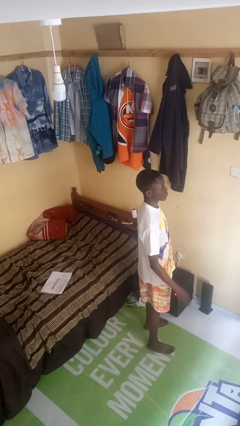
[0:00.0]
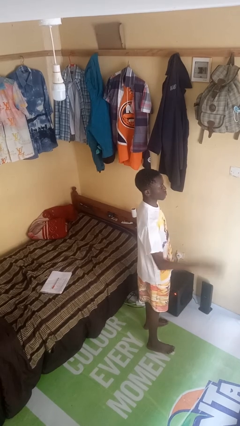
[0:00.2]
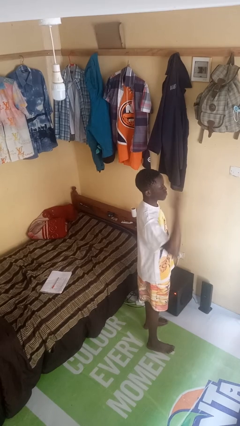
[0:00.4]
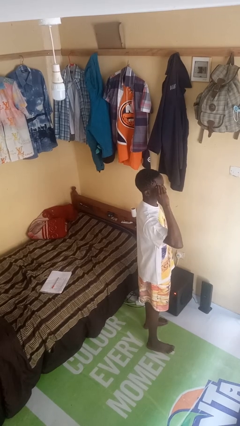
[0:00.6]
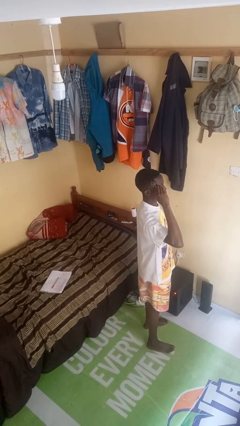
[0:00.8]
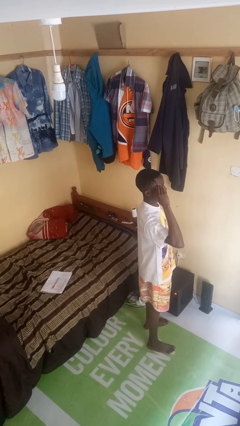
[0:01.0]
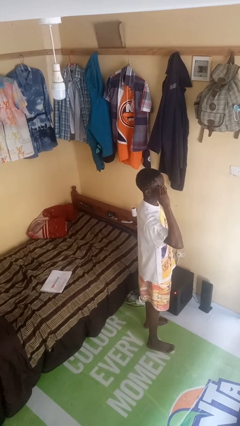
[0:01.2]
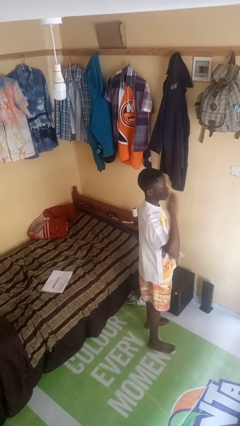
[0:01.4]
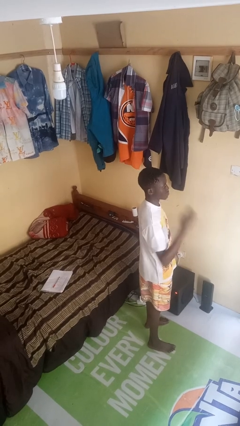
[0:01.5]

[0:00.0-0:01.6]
person salutes

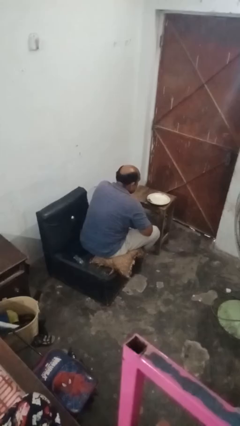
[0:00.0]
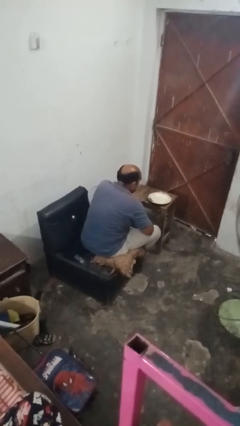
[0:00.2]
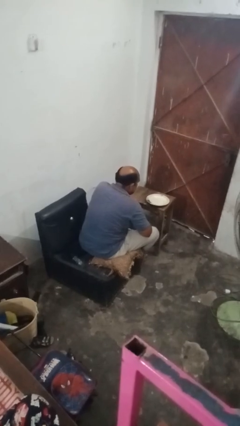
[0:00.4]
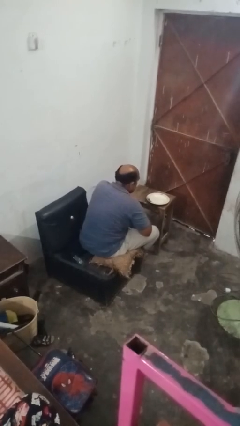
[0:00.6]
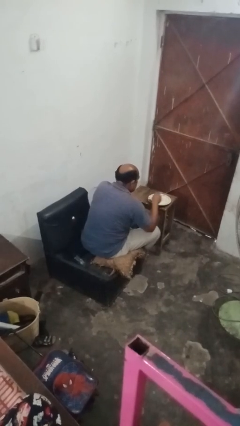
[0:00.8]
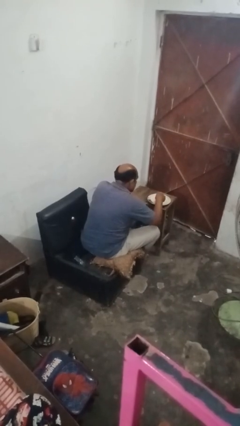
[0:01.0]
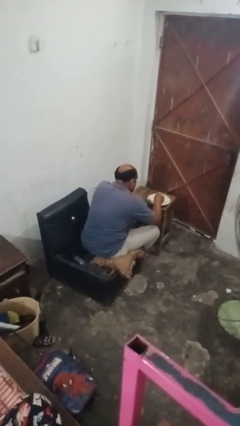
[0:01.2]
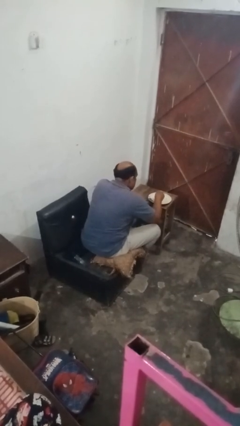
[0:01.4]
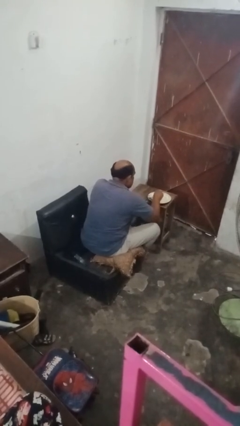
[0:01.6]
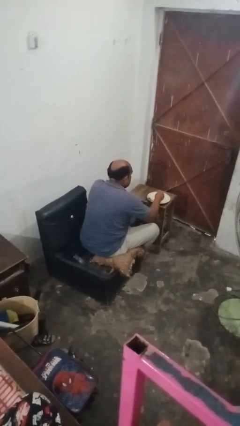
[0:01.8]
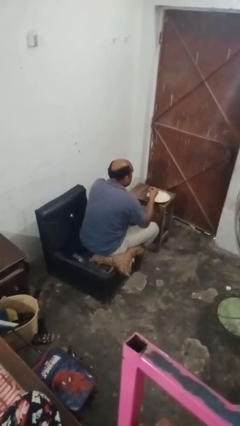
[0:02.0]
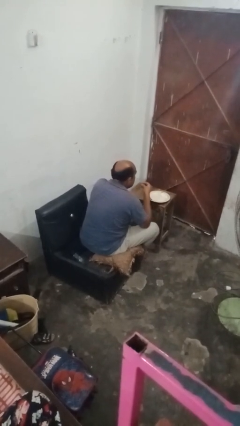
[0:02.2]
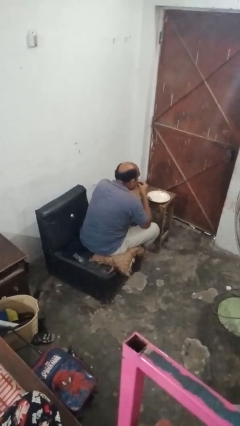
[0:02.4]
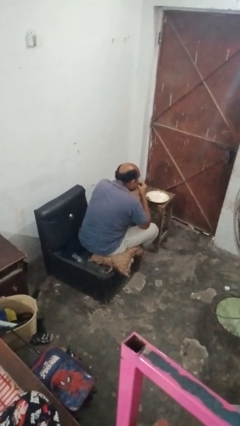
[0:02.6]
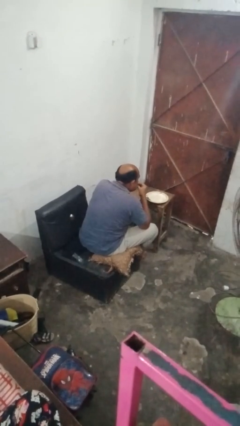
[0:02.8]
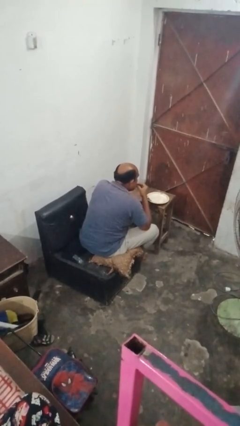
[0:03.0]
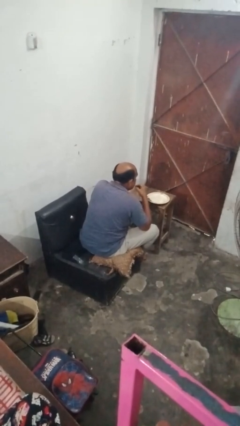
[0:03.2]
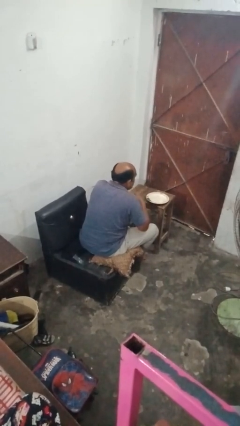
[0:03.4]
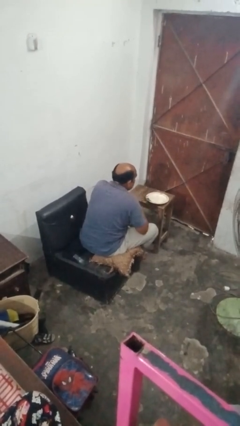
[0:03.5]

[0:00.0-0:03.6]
person eats with hands

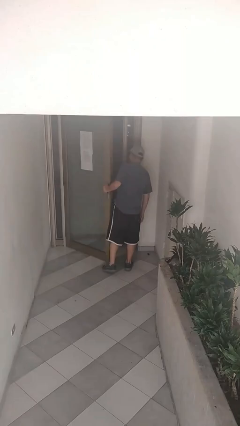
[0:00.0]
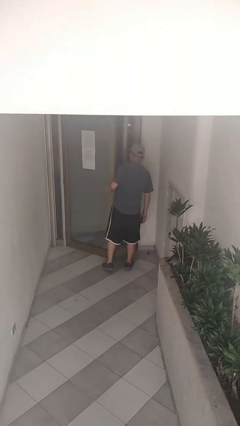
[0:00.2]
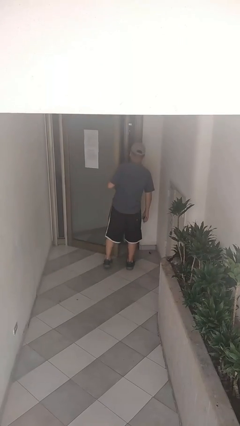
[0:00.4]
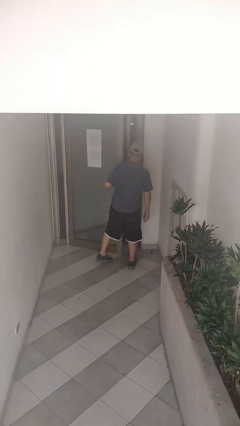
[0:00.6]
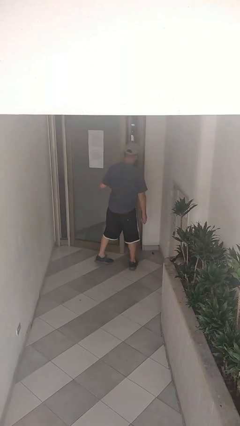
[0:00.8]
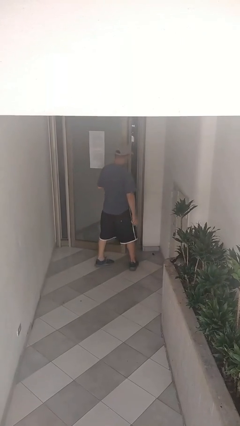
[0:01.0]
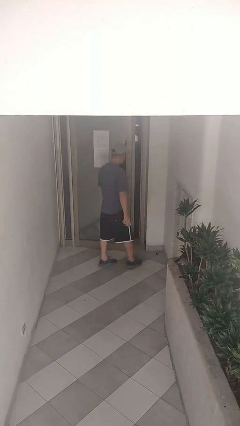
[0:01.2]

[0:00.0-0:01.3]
person closes facility door

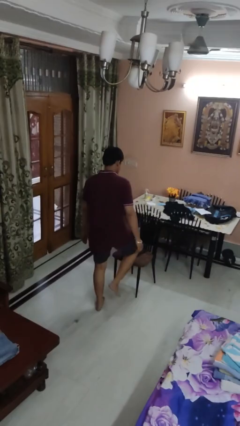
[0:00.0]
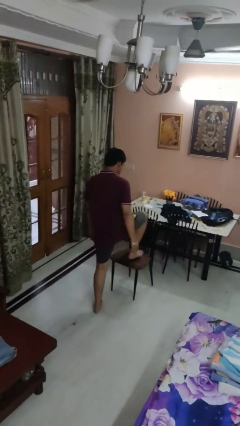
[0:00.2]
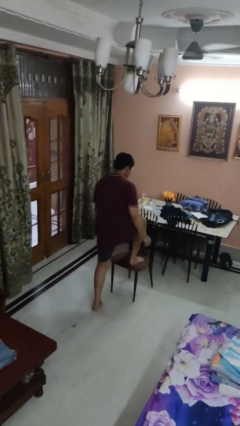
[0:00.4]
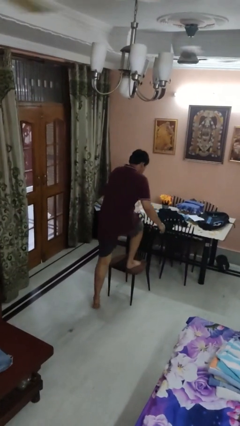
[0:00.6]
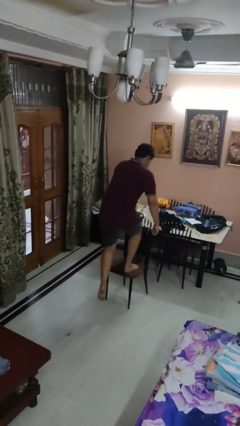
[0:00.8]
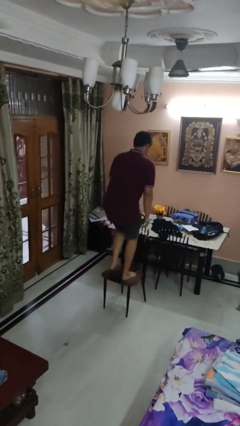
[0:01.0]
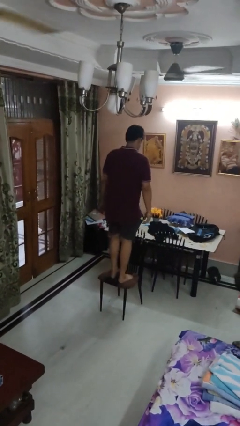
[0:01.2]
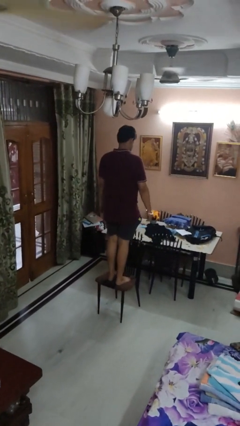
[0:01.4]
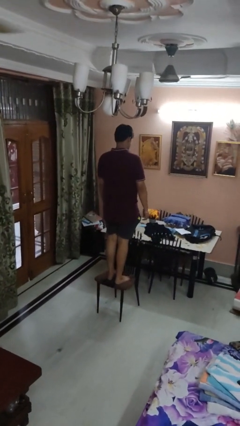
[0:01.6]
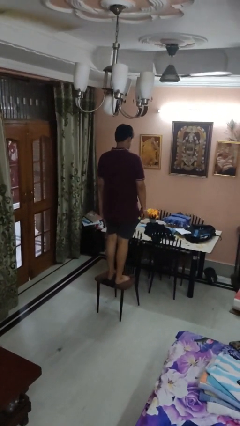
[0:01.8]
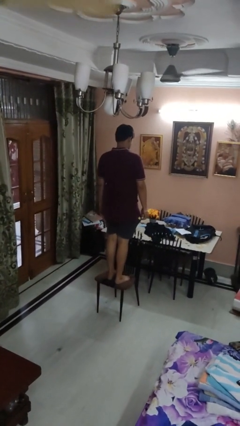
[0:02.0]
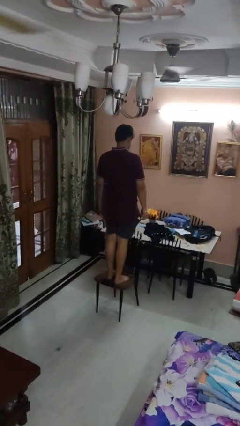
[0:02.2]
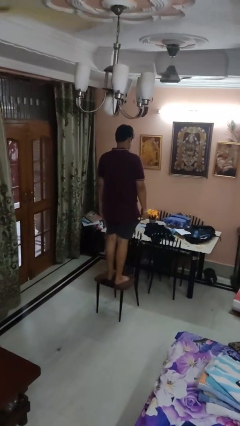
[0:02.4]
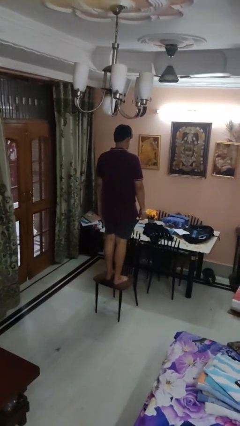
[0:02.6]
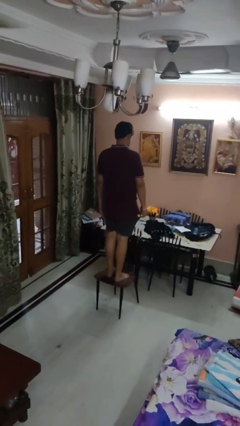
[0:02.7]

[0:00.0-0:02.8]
person climbs on chair

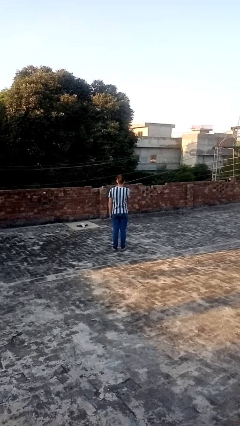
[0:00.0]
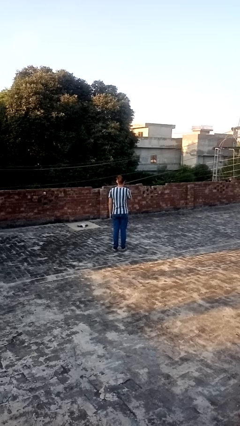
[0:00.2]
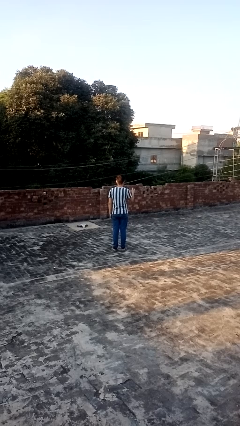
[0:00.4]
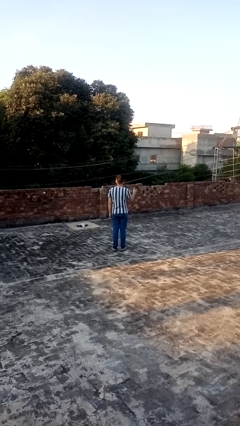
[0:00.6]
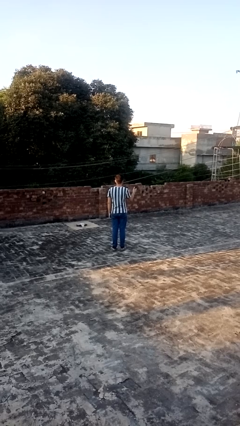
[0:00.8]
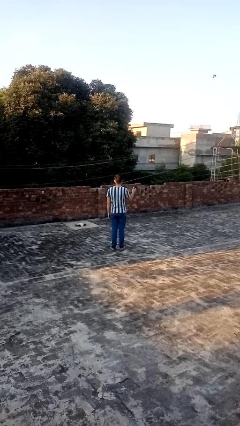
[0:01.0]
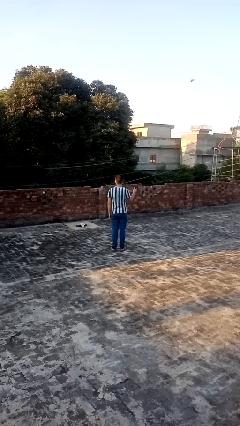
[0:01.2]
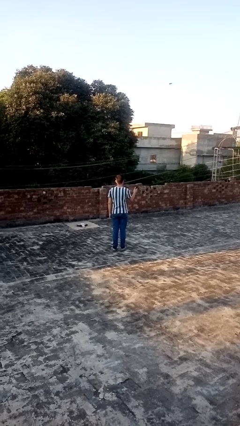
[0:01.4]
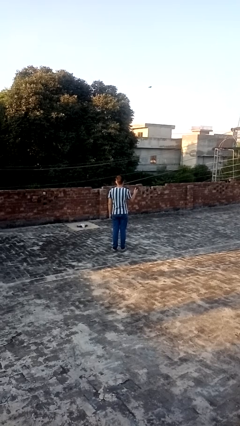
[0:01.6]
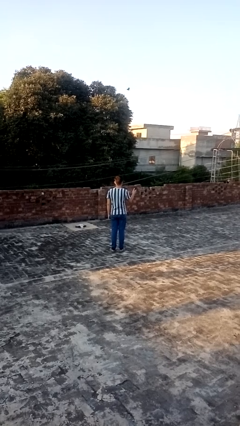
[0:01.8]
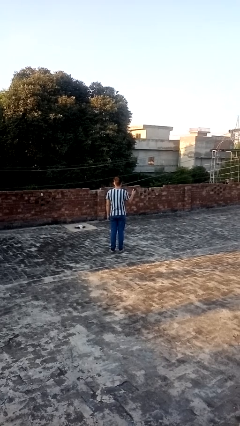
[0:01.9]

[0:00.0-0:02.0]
person gestures swipe right

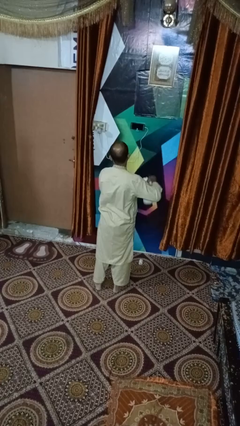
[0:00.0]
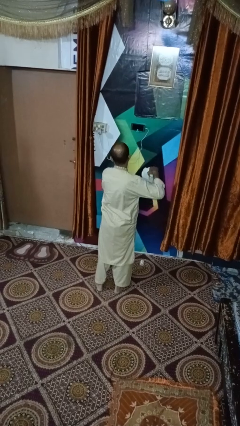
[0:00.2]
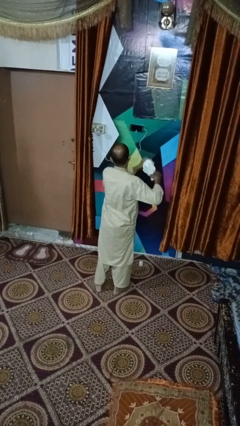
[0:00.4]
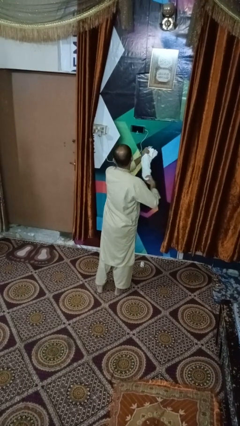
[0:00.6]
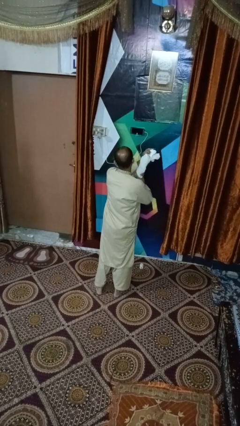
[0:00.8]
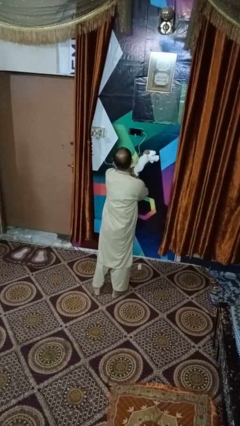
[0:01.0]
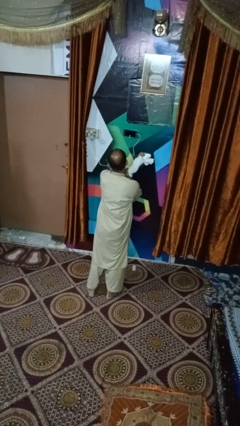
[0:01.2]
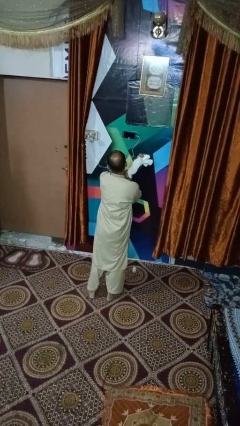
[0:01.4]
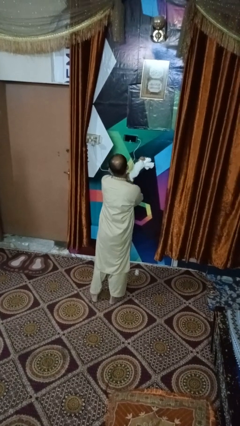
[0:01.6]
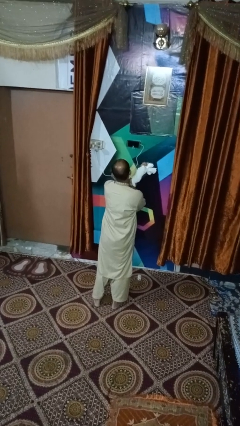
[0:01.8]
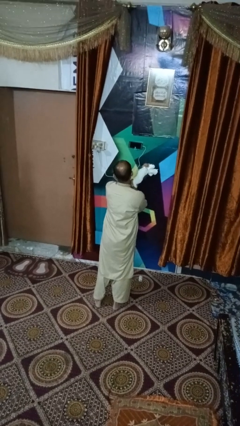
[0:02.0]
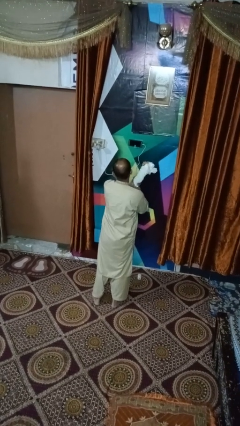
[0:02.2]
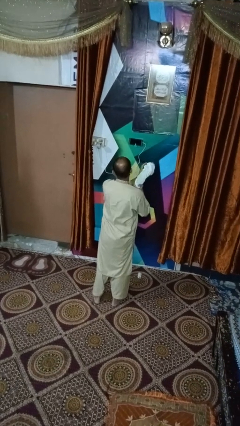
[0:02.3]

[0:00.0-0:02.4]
person squeezes object

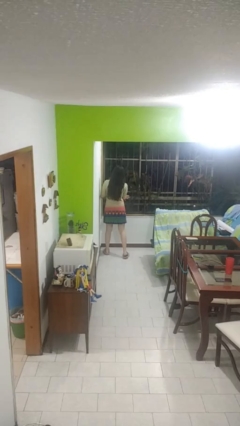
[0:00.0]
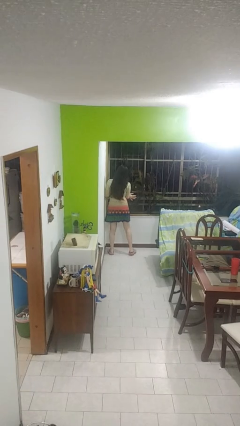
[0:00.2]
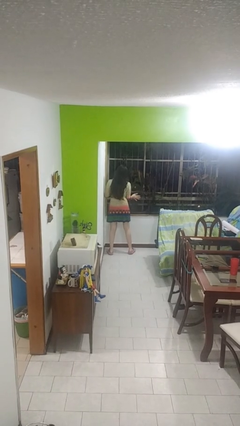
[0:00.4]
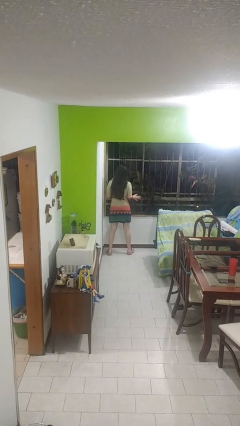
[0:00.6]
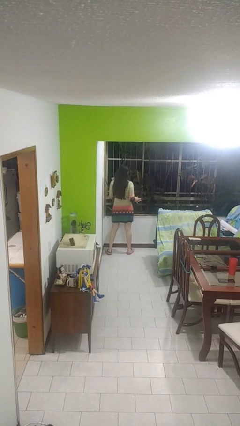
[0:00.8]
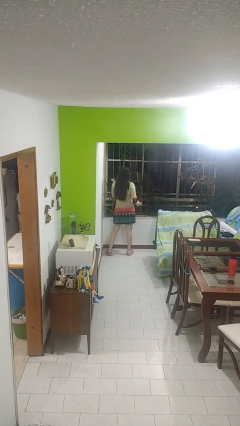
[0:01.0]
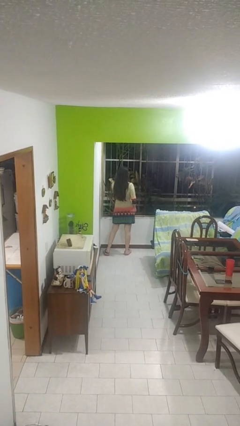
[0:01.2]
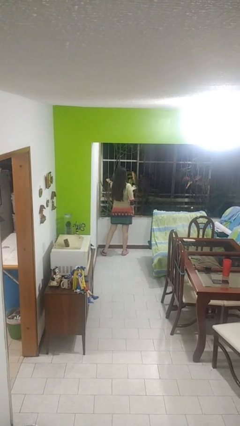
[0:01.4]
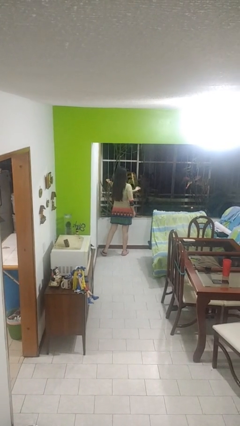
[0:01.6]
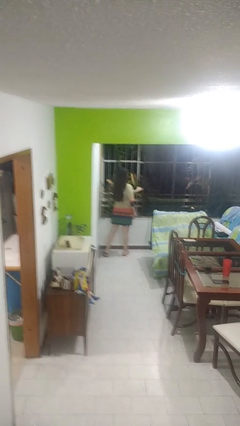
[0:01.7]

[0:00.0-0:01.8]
person opens home window

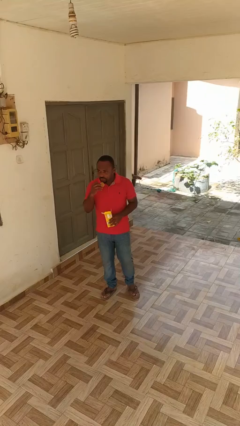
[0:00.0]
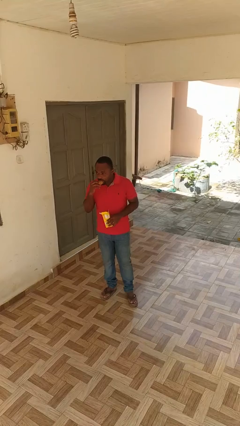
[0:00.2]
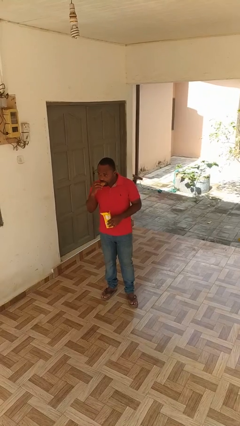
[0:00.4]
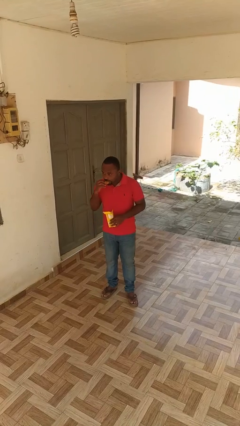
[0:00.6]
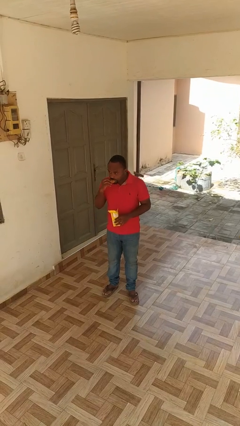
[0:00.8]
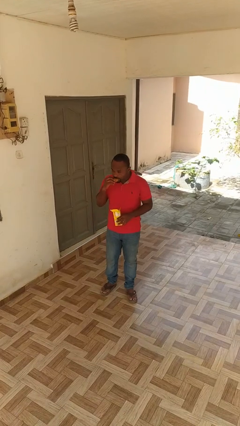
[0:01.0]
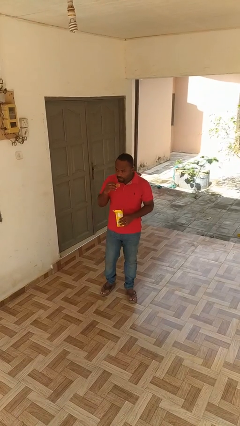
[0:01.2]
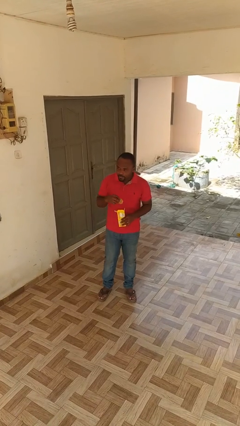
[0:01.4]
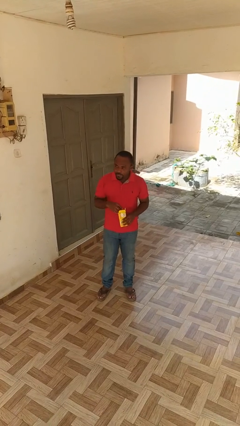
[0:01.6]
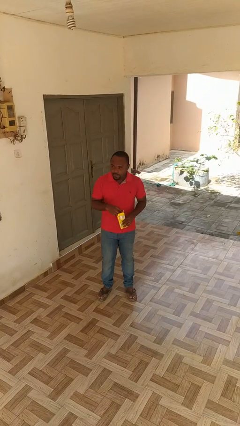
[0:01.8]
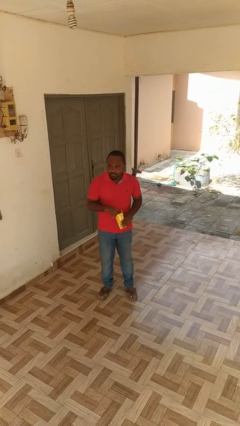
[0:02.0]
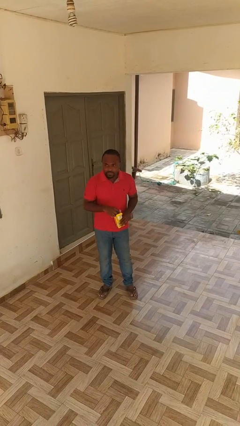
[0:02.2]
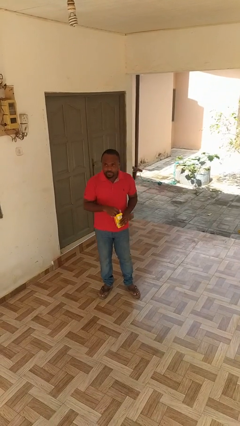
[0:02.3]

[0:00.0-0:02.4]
person eats snack from bag
